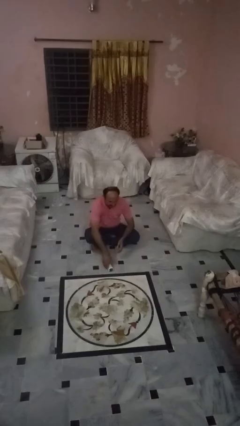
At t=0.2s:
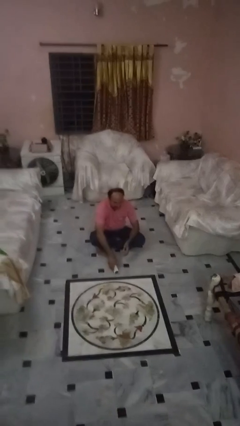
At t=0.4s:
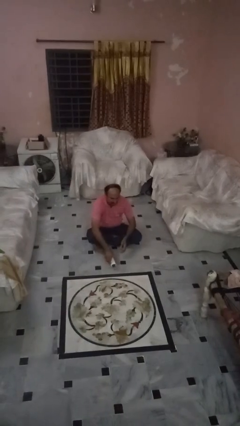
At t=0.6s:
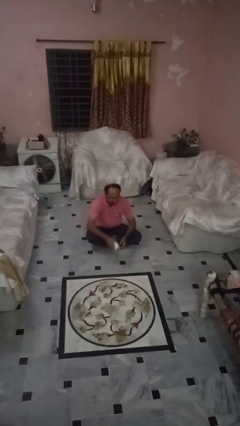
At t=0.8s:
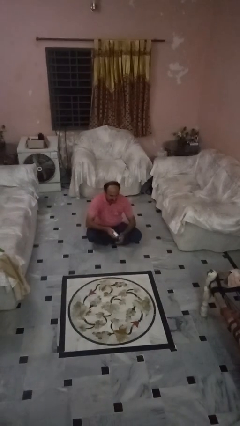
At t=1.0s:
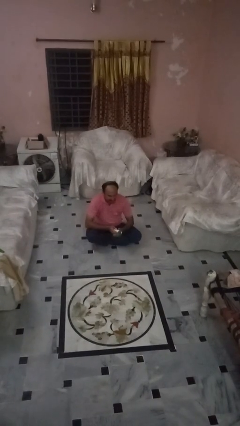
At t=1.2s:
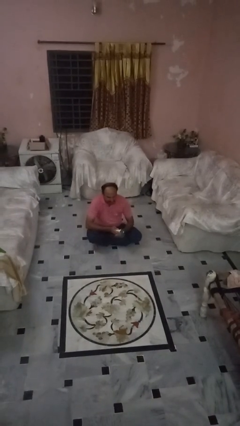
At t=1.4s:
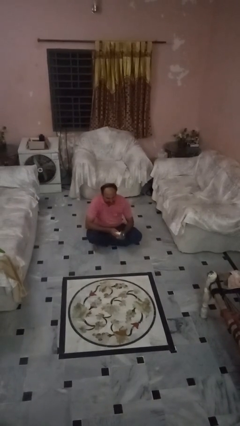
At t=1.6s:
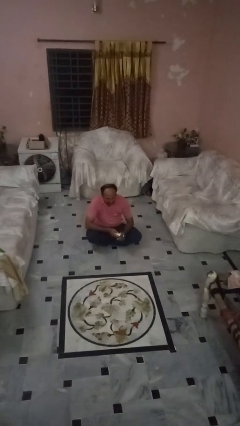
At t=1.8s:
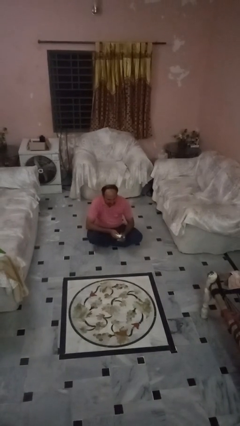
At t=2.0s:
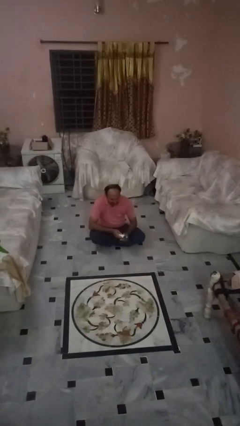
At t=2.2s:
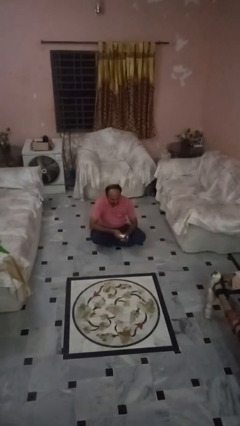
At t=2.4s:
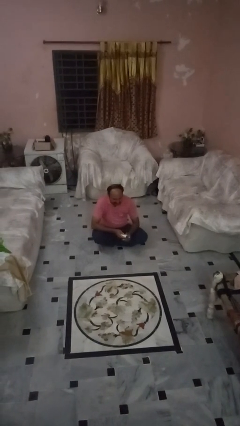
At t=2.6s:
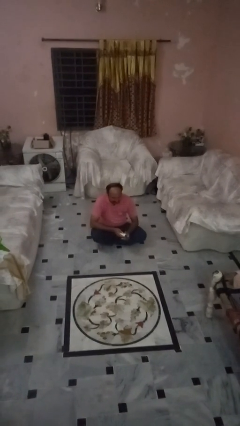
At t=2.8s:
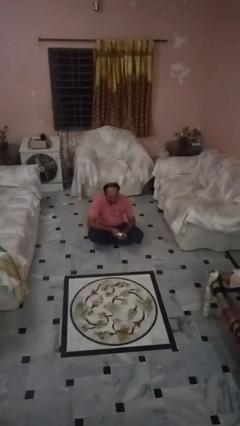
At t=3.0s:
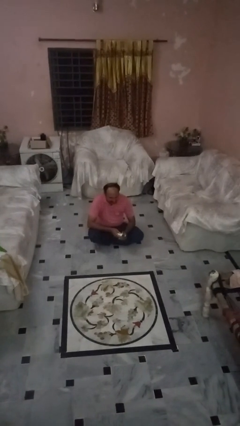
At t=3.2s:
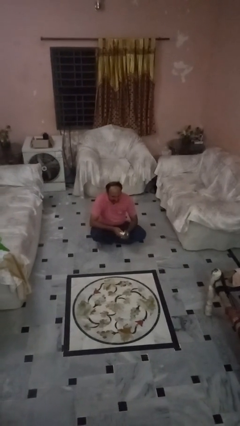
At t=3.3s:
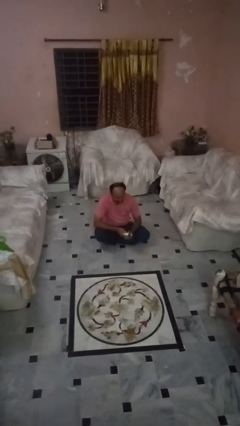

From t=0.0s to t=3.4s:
person picks up object from floor

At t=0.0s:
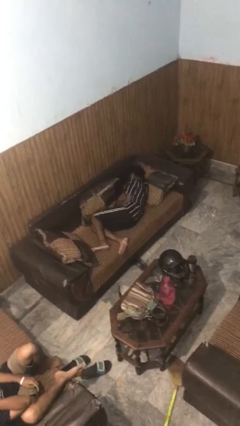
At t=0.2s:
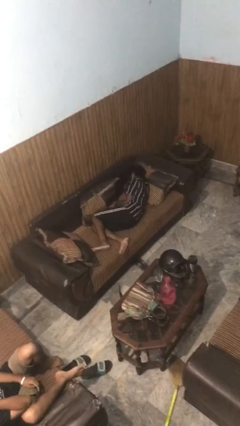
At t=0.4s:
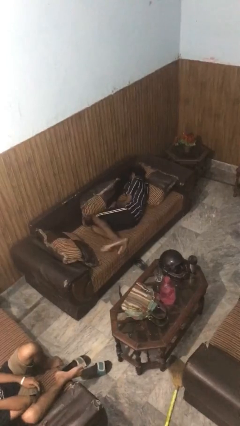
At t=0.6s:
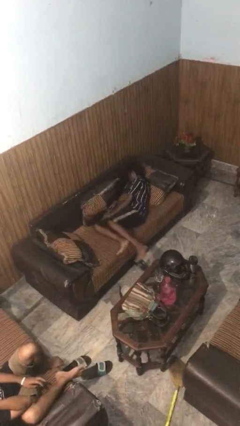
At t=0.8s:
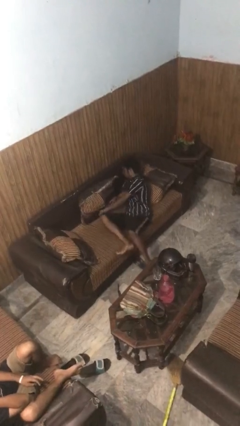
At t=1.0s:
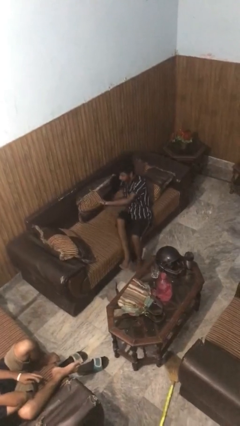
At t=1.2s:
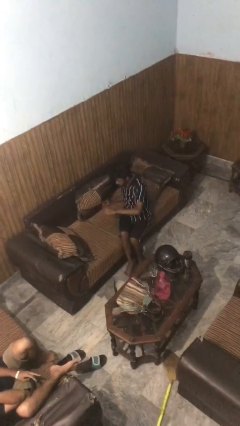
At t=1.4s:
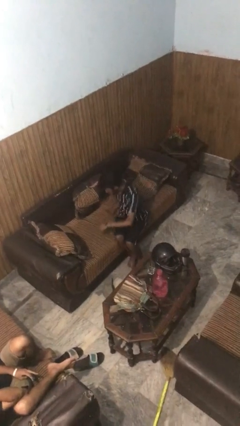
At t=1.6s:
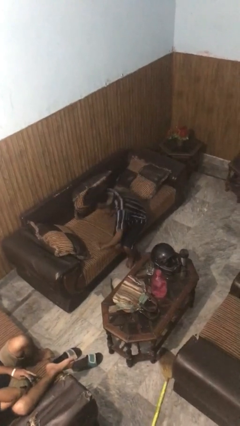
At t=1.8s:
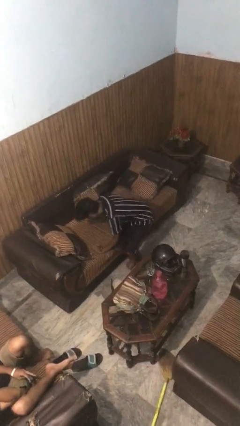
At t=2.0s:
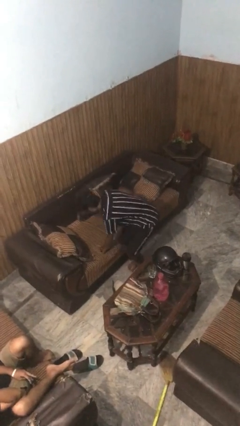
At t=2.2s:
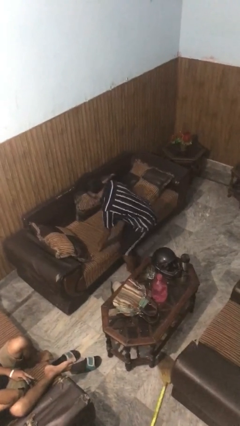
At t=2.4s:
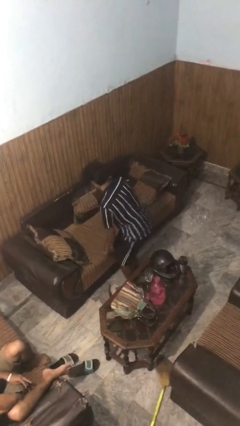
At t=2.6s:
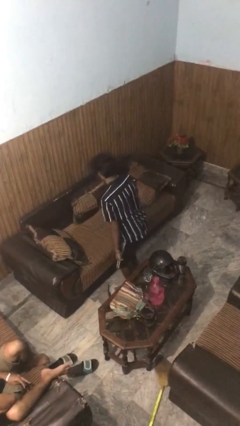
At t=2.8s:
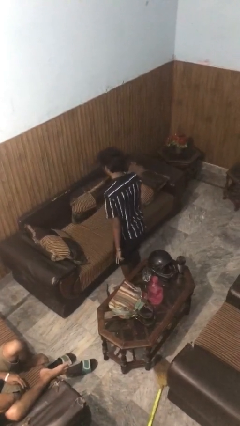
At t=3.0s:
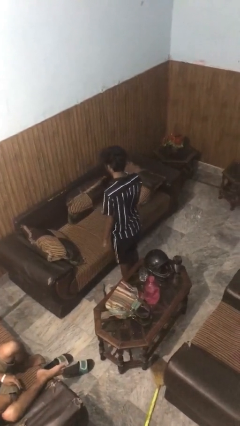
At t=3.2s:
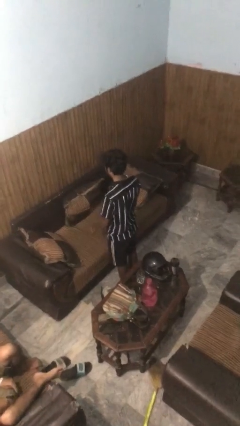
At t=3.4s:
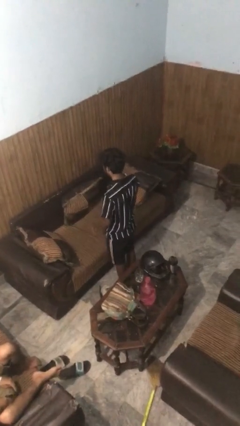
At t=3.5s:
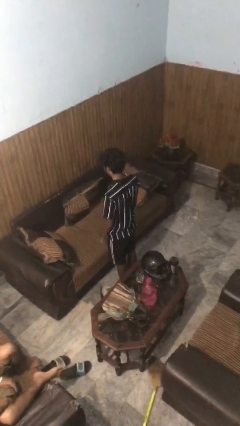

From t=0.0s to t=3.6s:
person stands up

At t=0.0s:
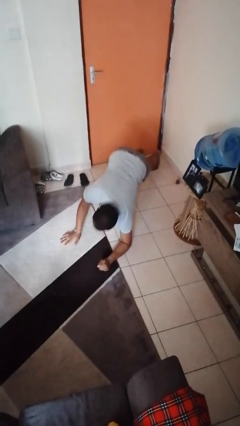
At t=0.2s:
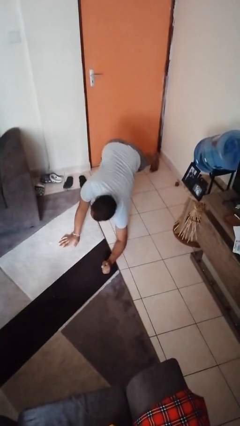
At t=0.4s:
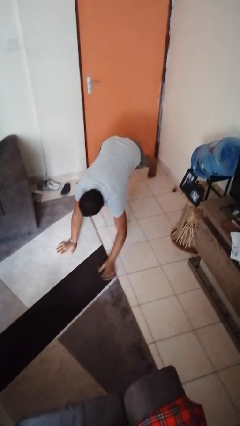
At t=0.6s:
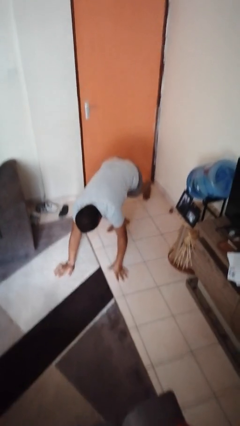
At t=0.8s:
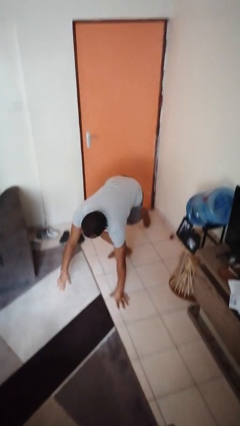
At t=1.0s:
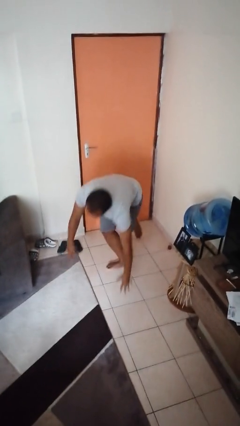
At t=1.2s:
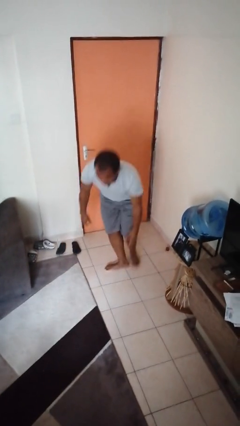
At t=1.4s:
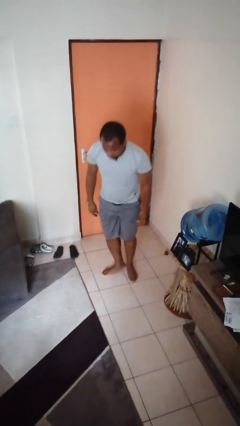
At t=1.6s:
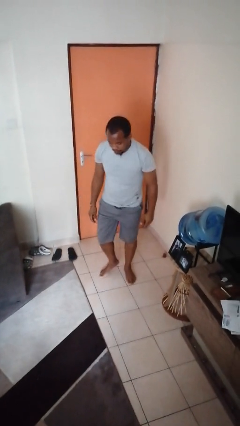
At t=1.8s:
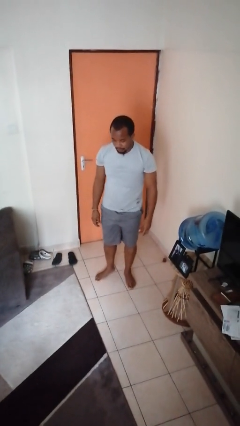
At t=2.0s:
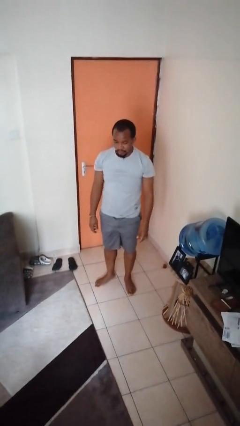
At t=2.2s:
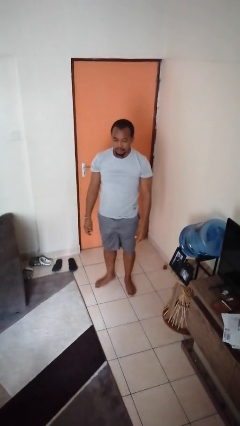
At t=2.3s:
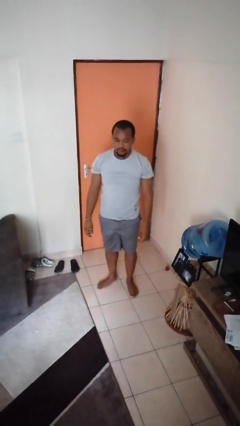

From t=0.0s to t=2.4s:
person stands up from floor

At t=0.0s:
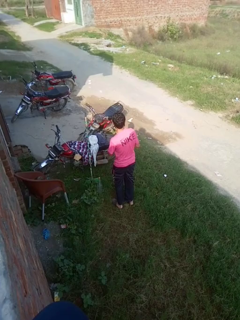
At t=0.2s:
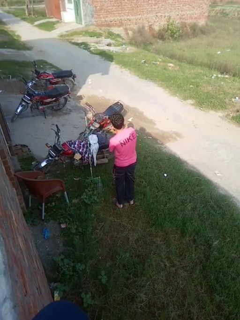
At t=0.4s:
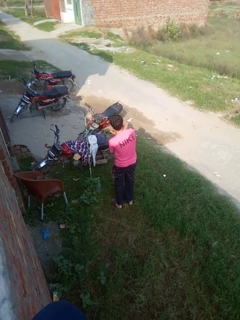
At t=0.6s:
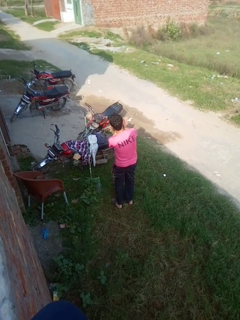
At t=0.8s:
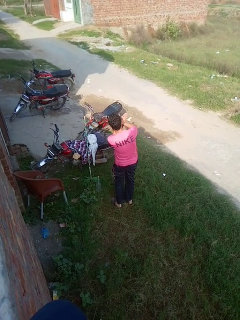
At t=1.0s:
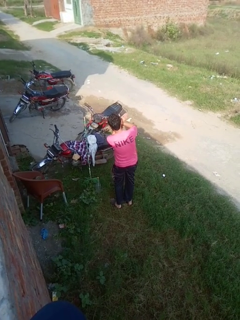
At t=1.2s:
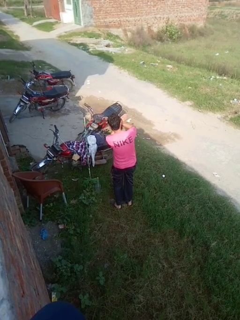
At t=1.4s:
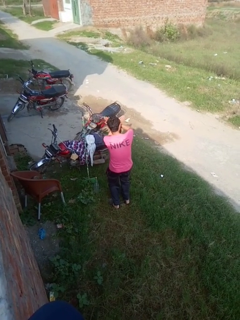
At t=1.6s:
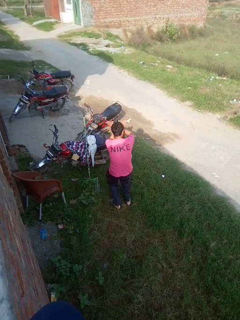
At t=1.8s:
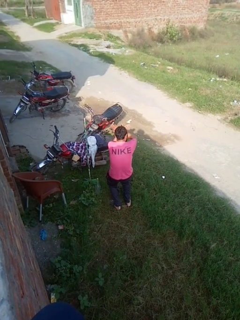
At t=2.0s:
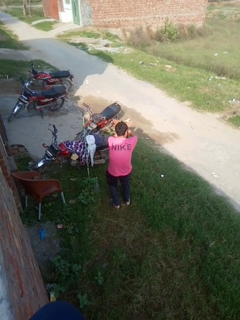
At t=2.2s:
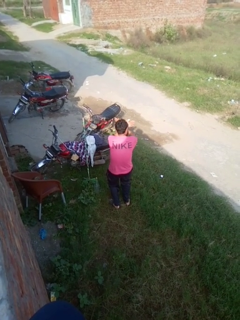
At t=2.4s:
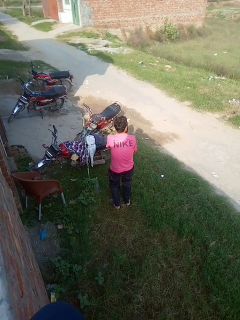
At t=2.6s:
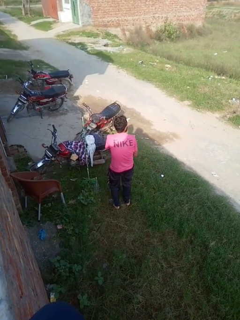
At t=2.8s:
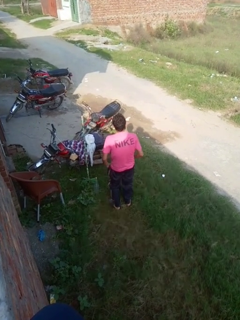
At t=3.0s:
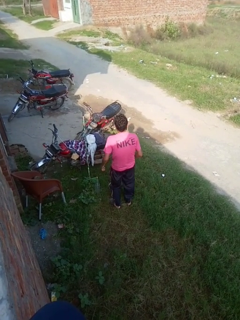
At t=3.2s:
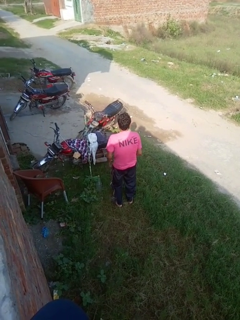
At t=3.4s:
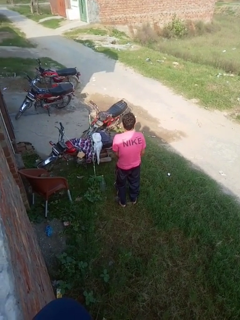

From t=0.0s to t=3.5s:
person karate chop

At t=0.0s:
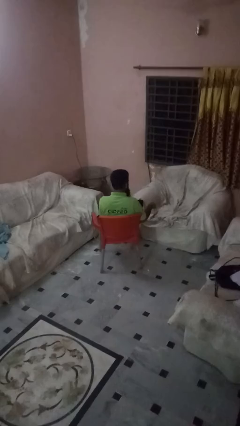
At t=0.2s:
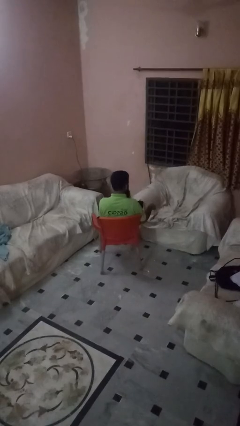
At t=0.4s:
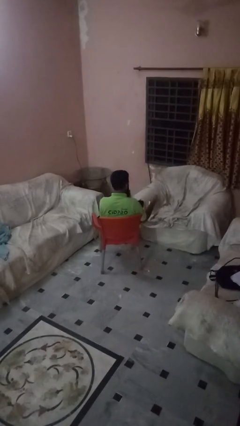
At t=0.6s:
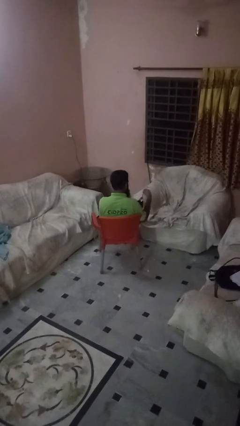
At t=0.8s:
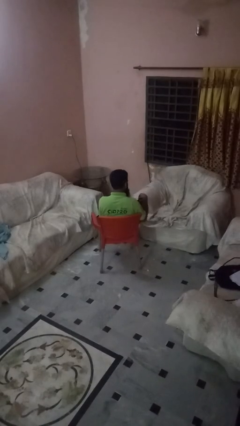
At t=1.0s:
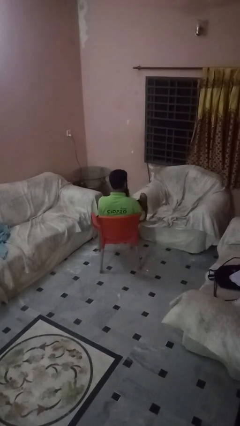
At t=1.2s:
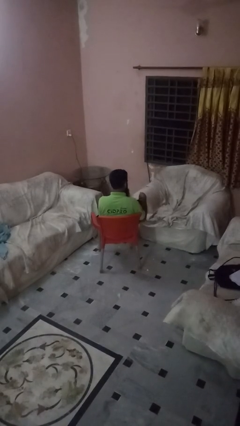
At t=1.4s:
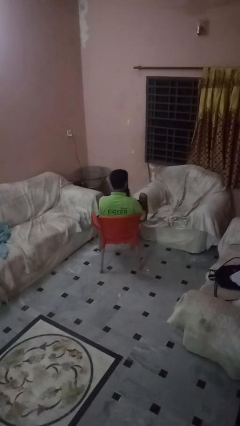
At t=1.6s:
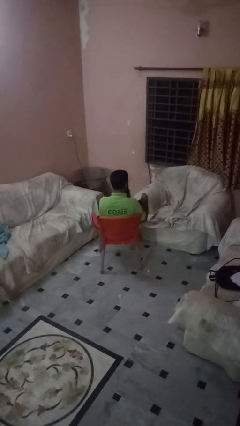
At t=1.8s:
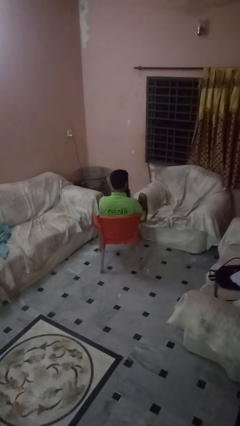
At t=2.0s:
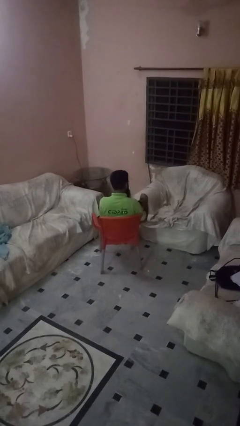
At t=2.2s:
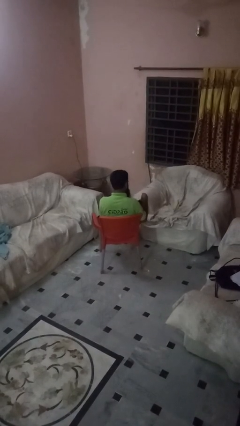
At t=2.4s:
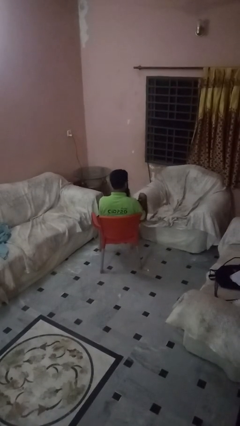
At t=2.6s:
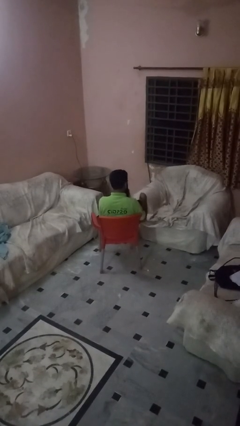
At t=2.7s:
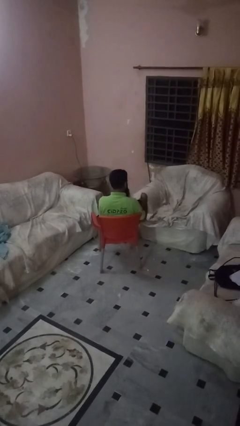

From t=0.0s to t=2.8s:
person stirs mug

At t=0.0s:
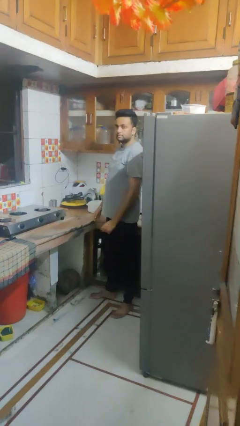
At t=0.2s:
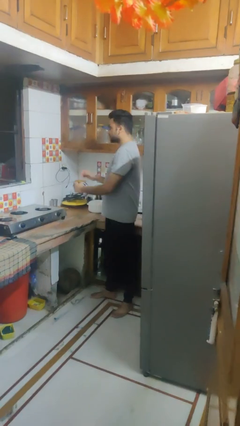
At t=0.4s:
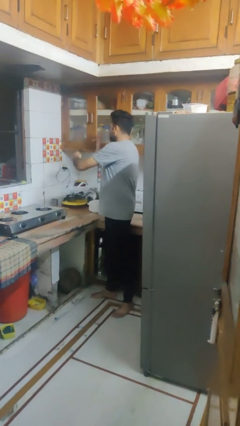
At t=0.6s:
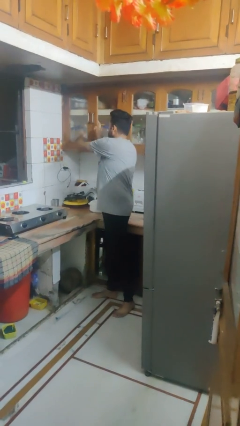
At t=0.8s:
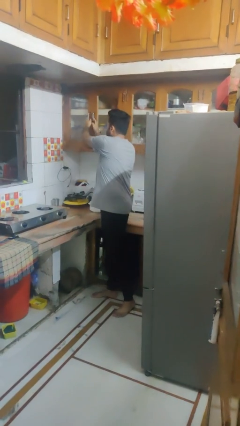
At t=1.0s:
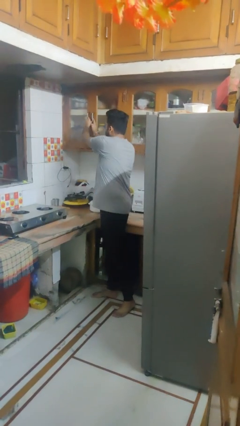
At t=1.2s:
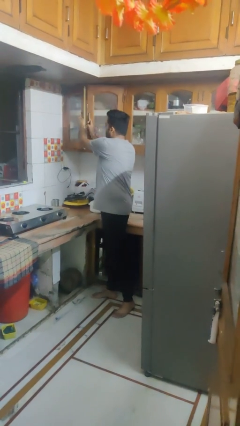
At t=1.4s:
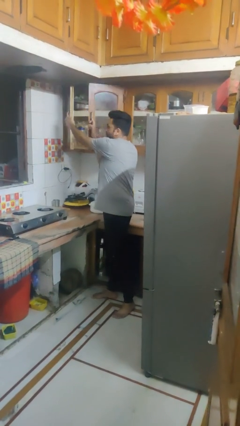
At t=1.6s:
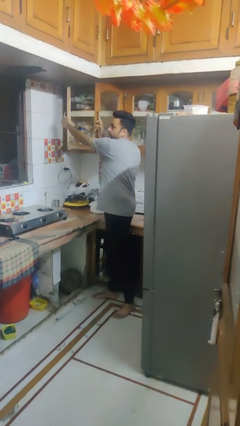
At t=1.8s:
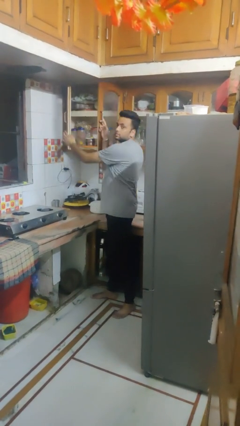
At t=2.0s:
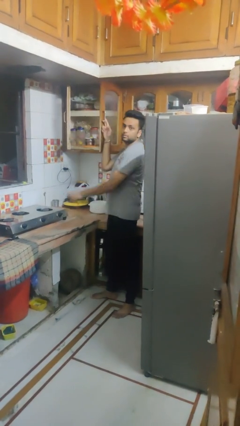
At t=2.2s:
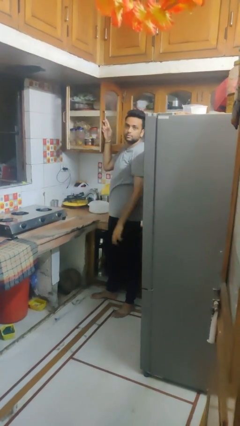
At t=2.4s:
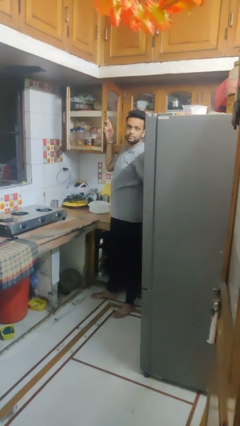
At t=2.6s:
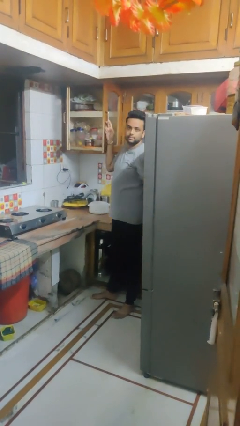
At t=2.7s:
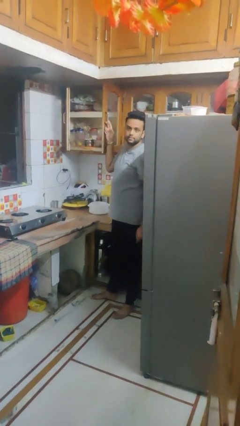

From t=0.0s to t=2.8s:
person opens cabinet

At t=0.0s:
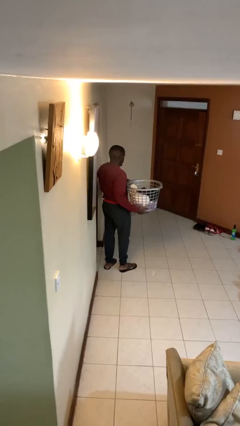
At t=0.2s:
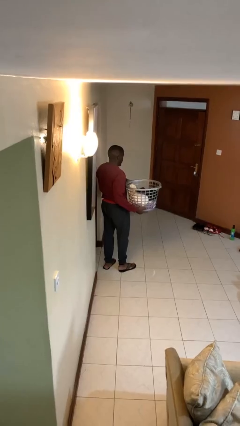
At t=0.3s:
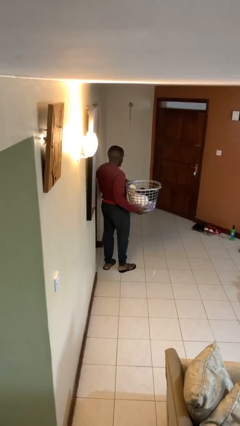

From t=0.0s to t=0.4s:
person carries laundry basket
